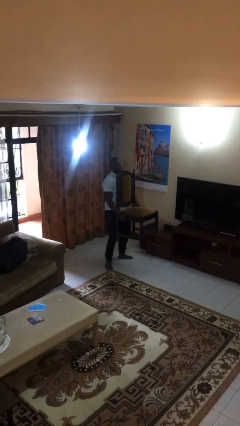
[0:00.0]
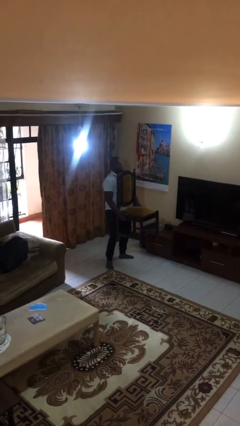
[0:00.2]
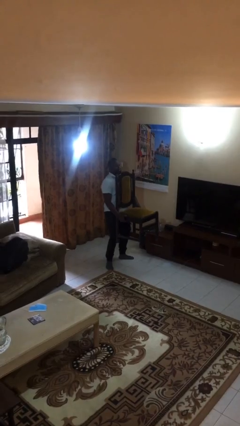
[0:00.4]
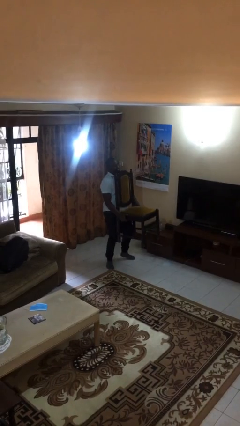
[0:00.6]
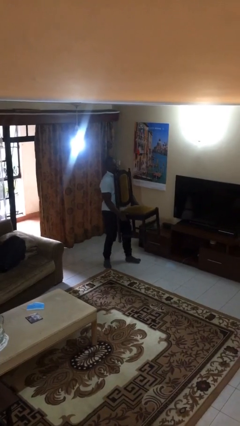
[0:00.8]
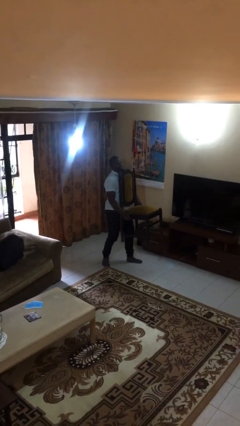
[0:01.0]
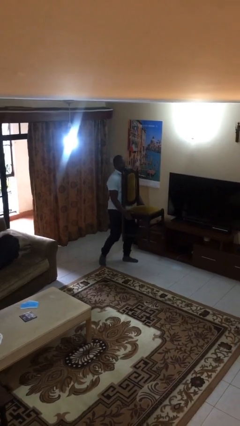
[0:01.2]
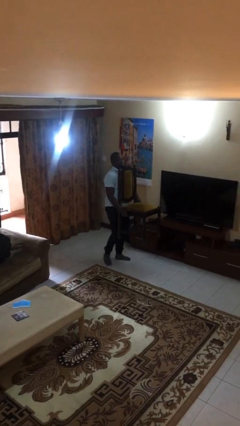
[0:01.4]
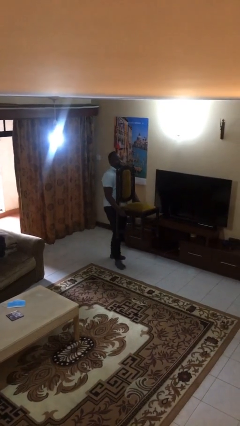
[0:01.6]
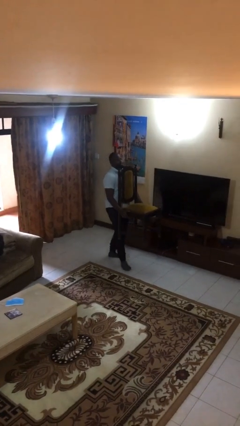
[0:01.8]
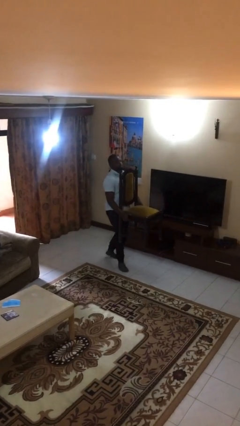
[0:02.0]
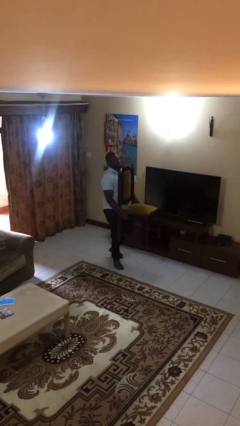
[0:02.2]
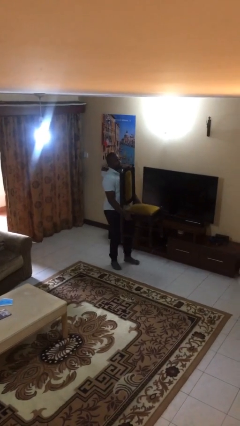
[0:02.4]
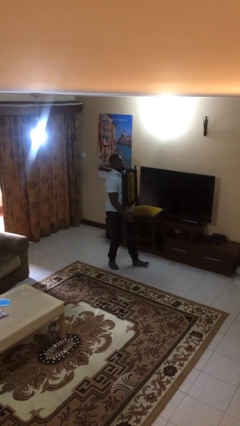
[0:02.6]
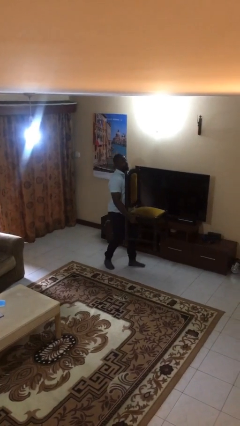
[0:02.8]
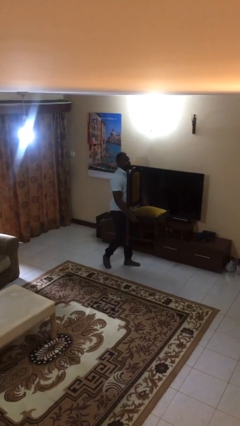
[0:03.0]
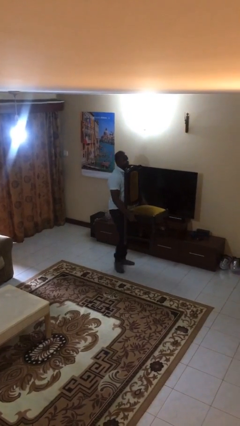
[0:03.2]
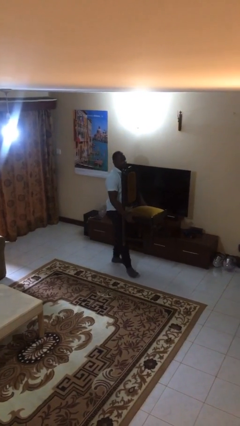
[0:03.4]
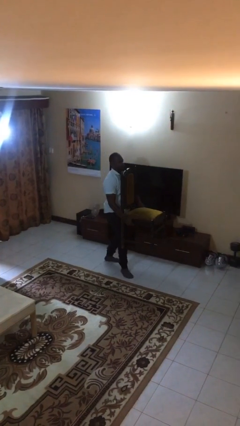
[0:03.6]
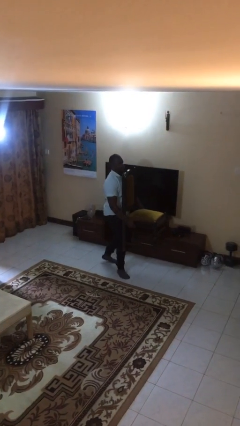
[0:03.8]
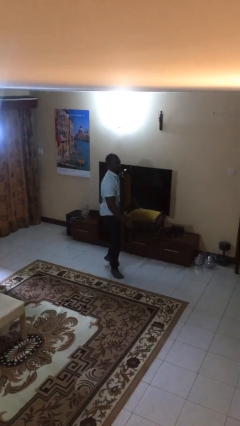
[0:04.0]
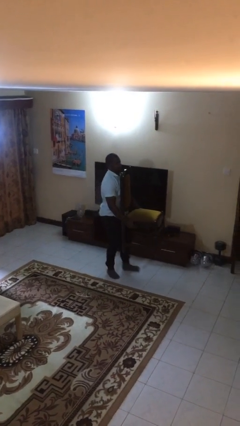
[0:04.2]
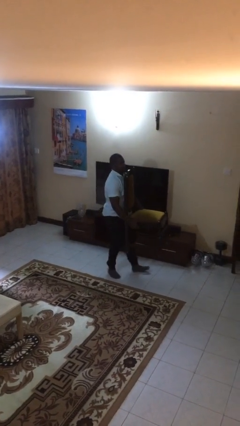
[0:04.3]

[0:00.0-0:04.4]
person carries heavy object

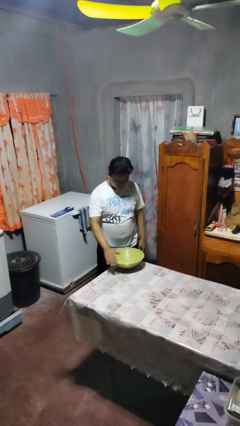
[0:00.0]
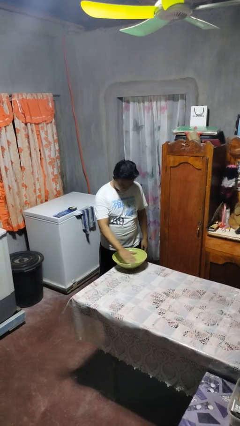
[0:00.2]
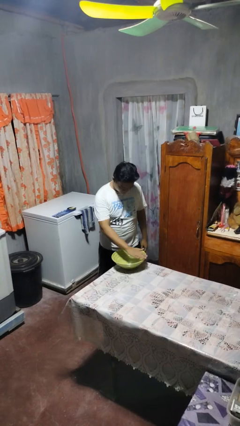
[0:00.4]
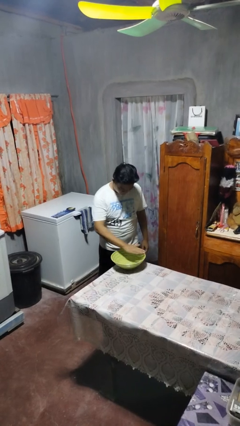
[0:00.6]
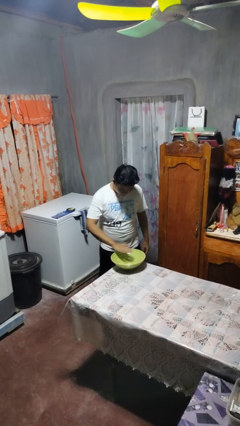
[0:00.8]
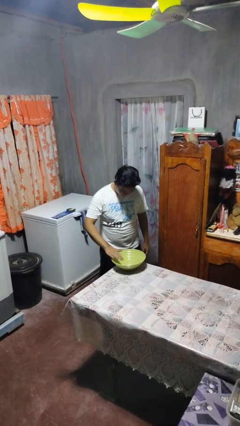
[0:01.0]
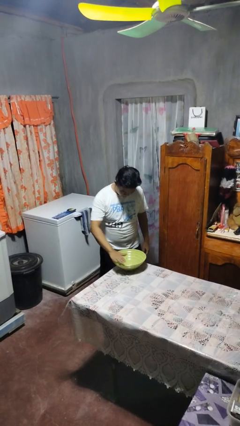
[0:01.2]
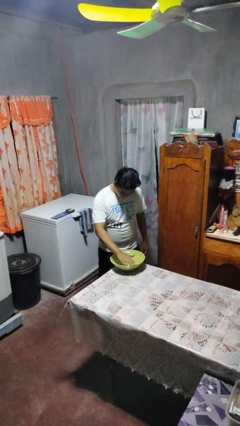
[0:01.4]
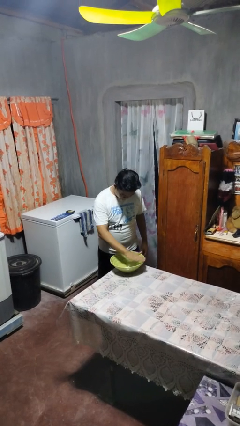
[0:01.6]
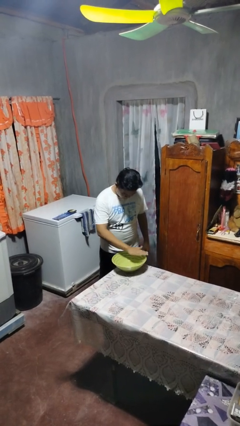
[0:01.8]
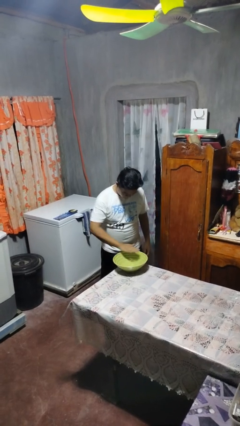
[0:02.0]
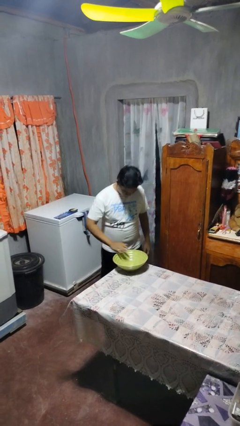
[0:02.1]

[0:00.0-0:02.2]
person waves hand over object

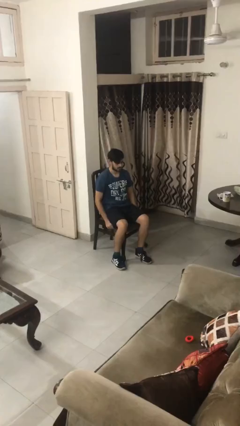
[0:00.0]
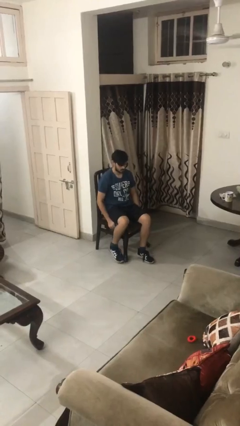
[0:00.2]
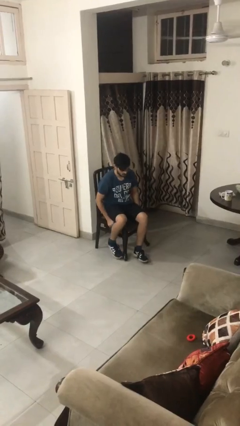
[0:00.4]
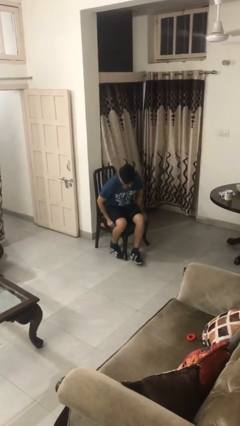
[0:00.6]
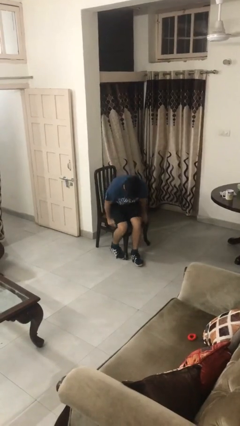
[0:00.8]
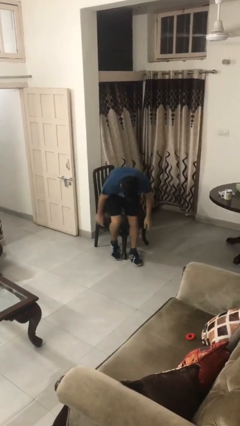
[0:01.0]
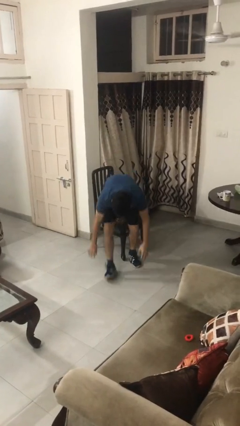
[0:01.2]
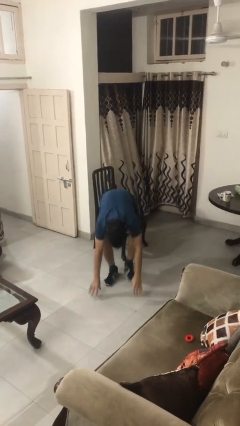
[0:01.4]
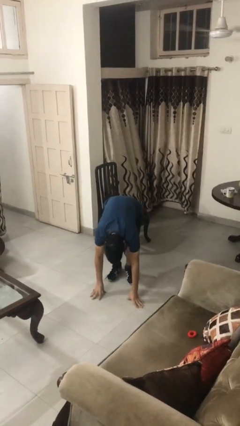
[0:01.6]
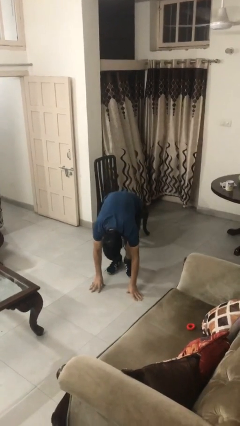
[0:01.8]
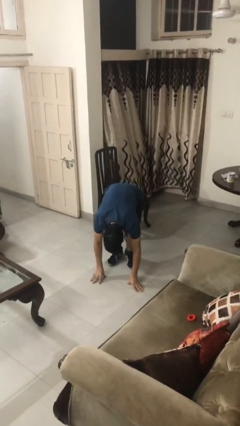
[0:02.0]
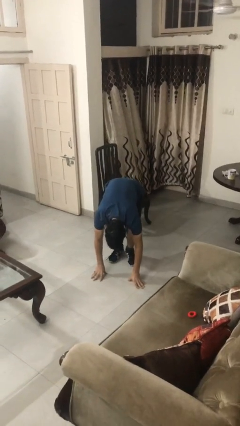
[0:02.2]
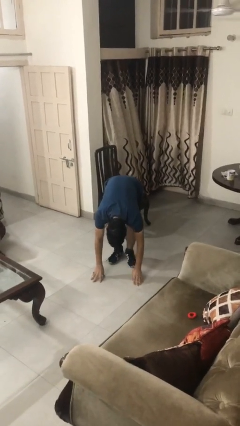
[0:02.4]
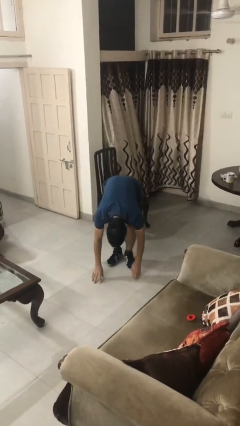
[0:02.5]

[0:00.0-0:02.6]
person falls from chair

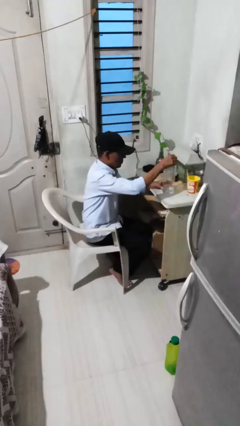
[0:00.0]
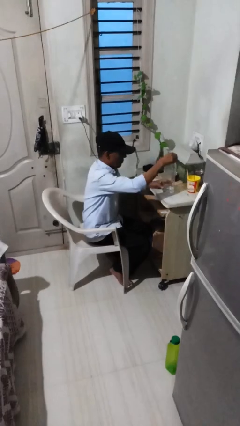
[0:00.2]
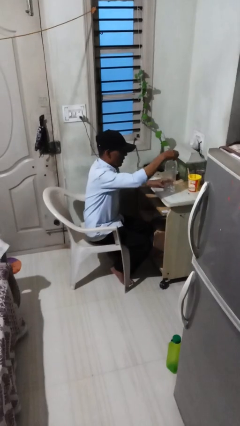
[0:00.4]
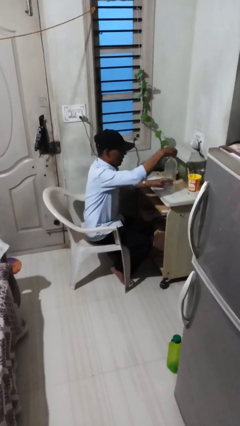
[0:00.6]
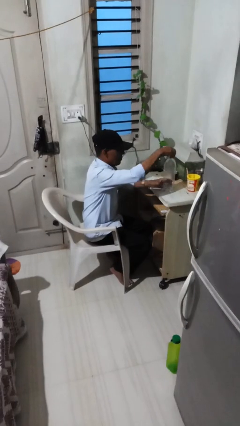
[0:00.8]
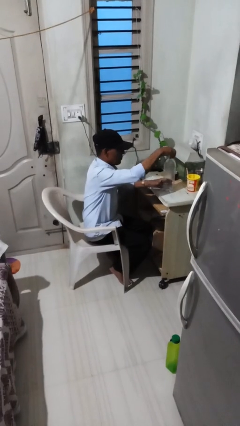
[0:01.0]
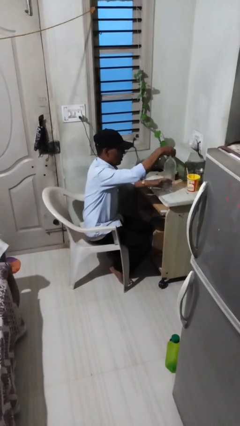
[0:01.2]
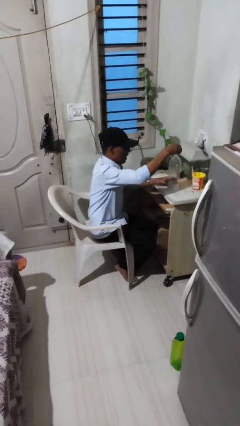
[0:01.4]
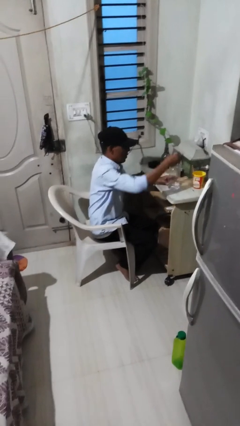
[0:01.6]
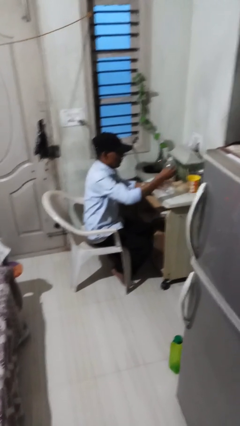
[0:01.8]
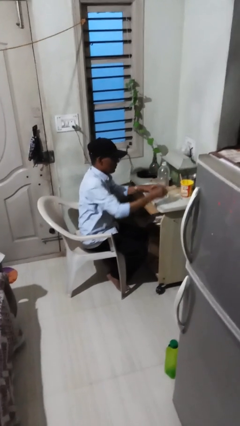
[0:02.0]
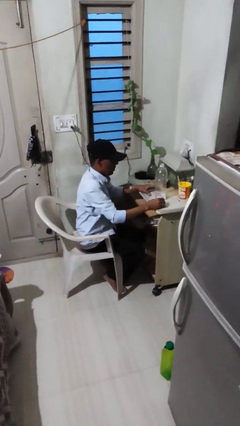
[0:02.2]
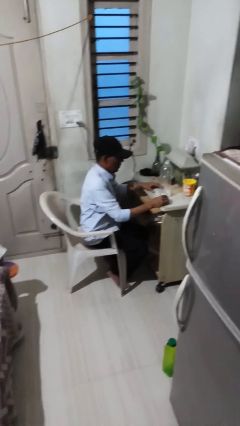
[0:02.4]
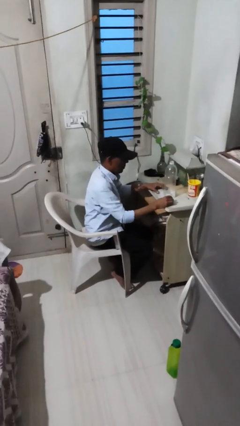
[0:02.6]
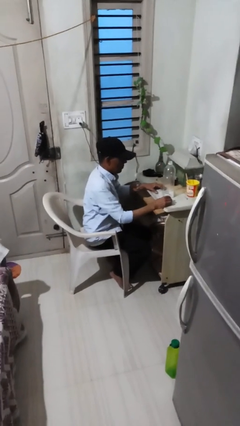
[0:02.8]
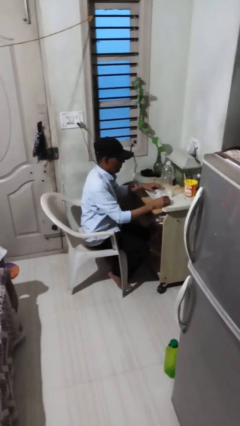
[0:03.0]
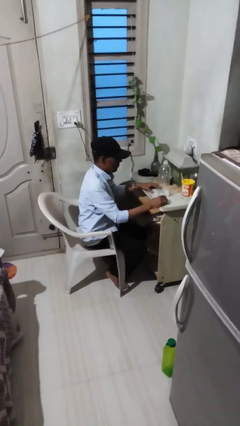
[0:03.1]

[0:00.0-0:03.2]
person unscrews lid from bottle

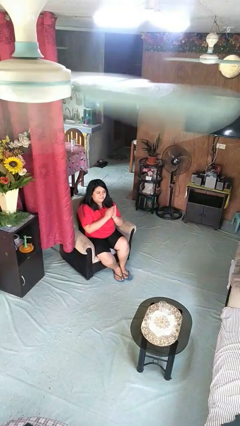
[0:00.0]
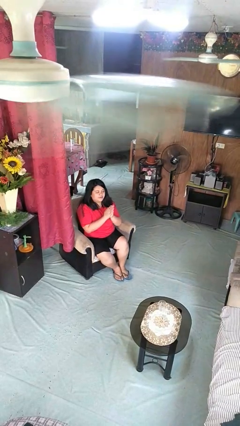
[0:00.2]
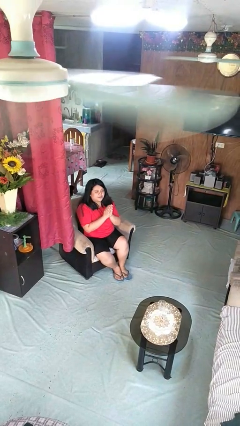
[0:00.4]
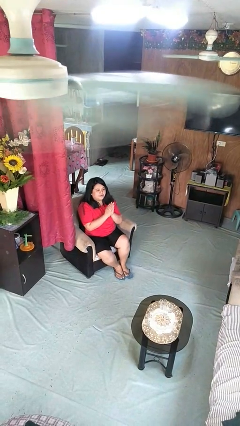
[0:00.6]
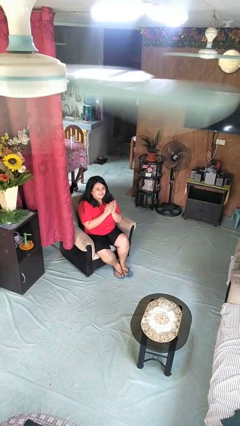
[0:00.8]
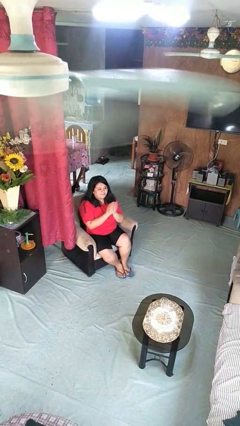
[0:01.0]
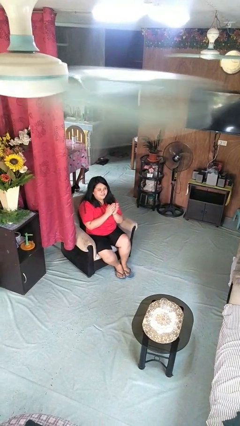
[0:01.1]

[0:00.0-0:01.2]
person claps hands

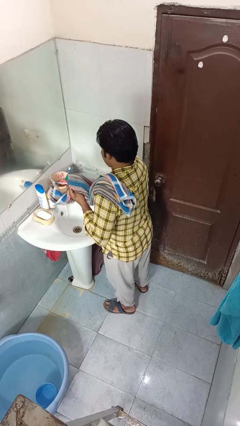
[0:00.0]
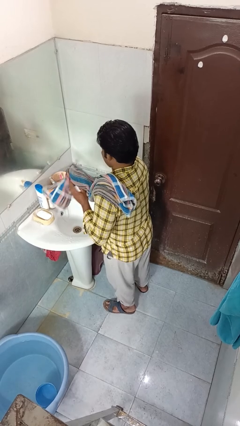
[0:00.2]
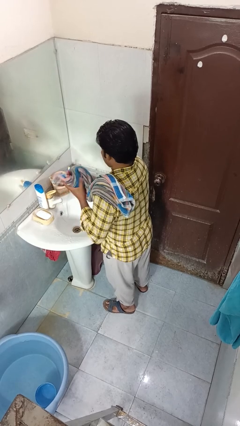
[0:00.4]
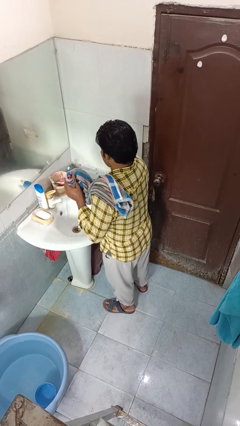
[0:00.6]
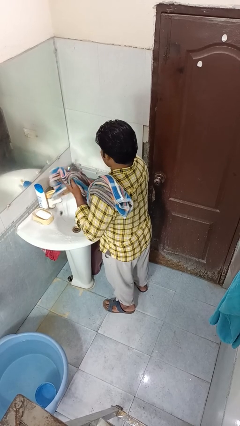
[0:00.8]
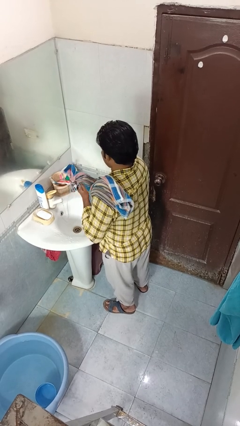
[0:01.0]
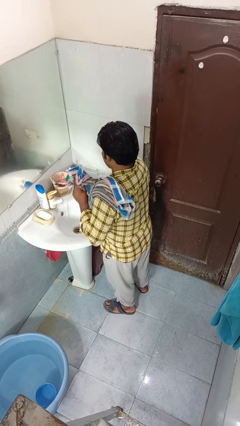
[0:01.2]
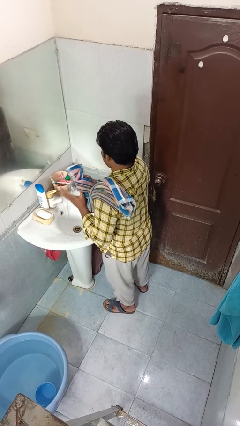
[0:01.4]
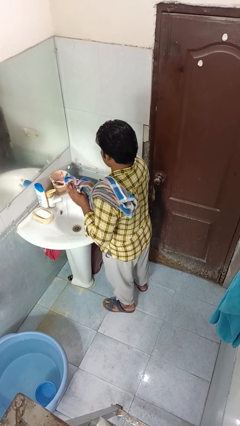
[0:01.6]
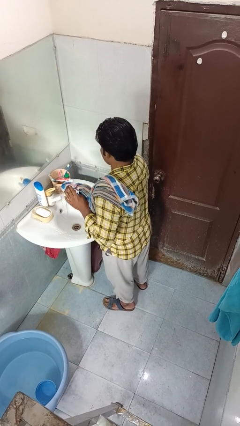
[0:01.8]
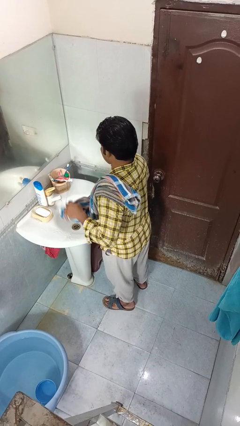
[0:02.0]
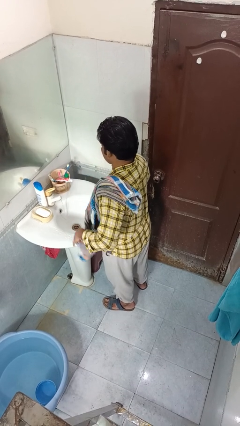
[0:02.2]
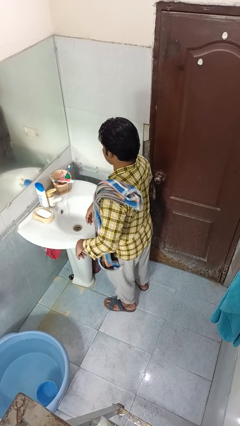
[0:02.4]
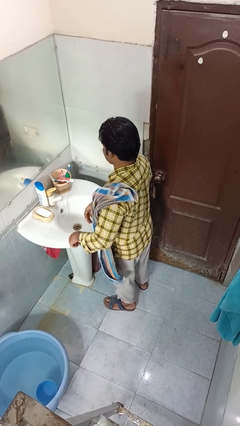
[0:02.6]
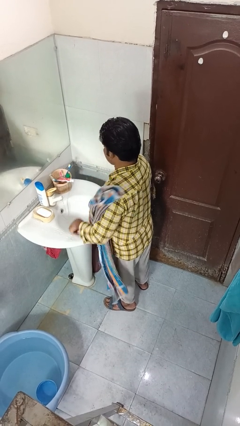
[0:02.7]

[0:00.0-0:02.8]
person dries hands with towel

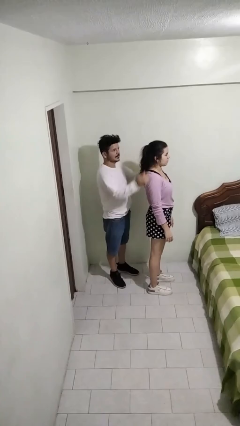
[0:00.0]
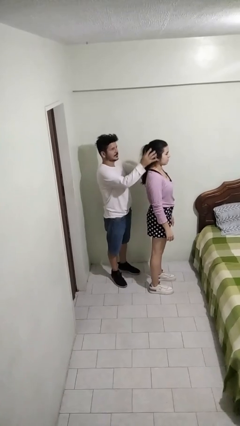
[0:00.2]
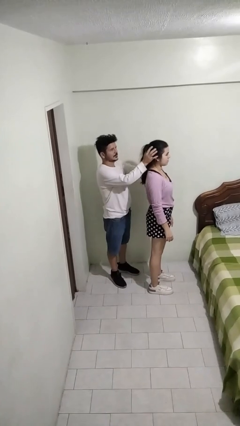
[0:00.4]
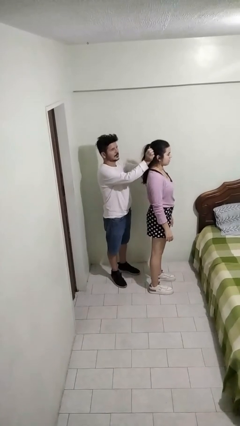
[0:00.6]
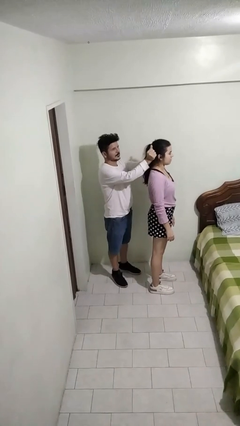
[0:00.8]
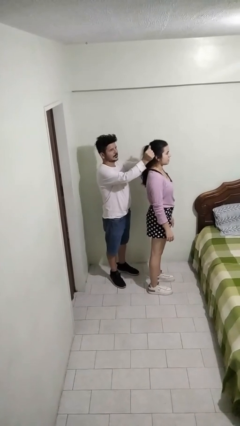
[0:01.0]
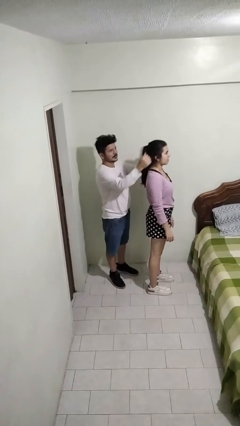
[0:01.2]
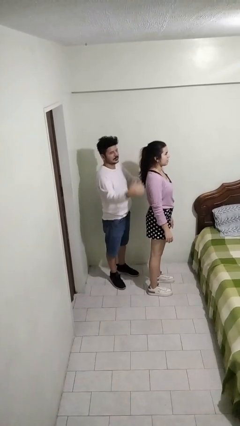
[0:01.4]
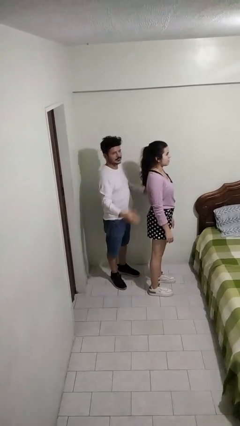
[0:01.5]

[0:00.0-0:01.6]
person grabs person by hair
